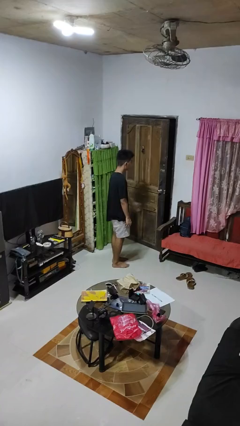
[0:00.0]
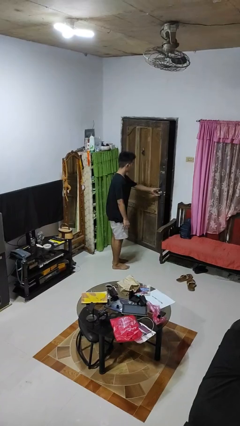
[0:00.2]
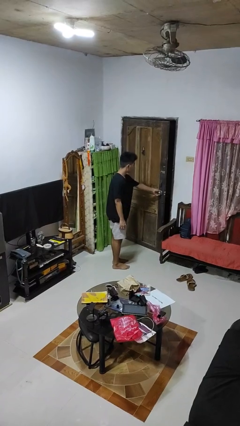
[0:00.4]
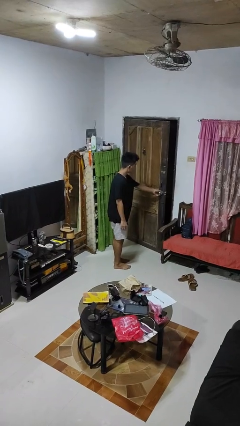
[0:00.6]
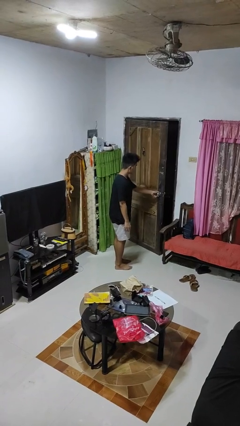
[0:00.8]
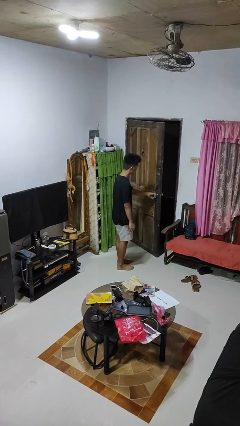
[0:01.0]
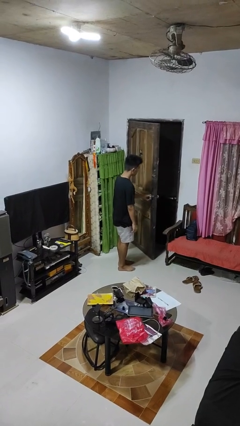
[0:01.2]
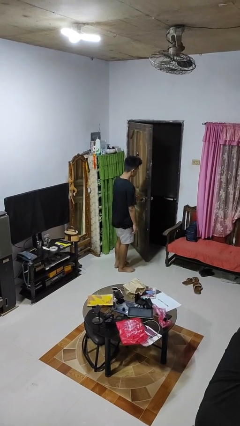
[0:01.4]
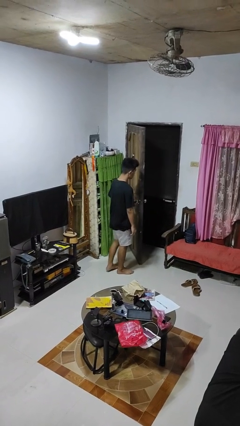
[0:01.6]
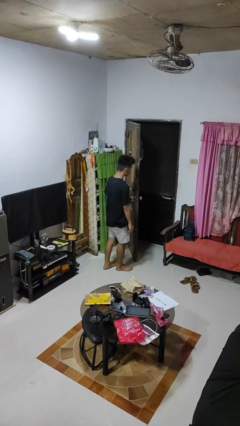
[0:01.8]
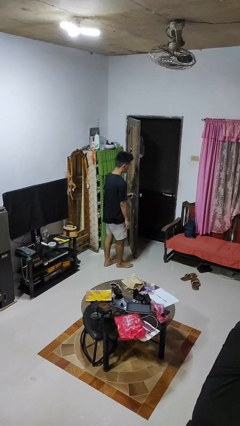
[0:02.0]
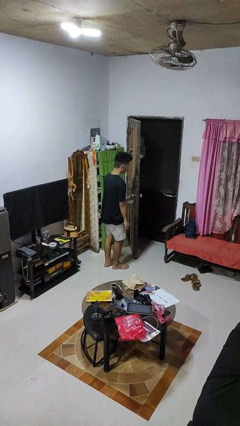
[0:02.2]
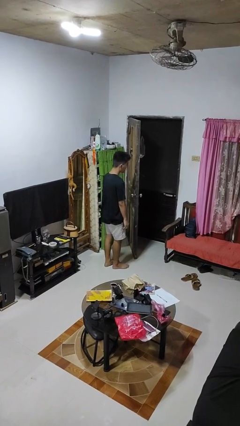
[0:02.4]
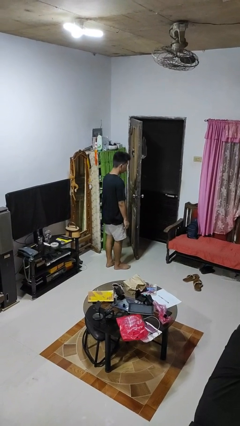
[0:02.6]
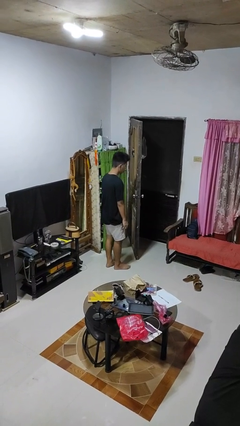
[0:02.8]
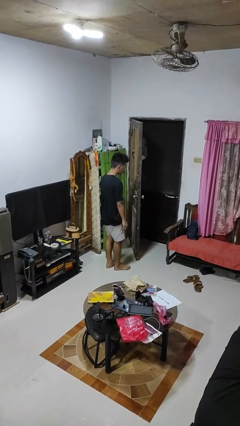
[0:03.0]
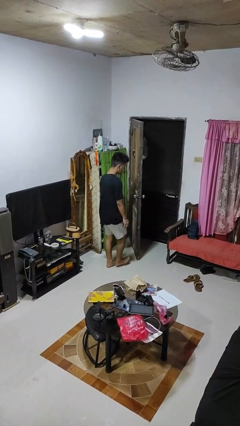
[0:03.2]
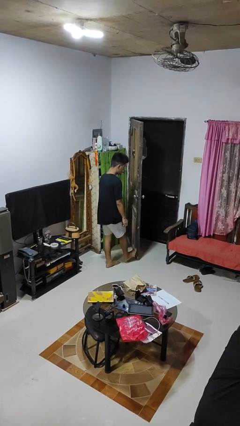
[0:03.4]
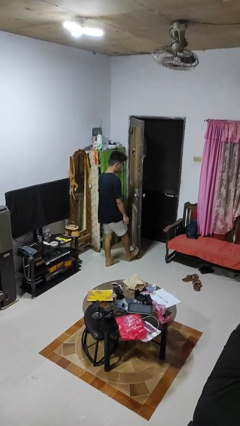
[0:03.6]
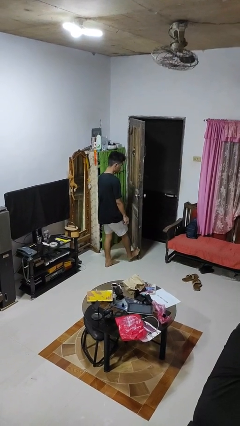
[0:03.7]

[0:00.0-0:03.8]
person opens facility door

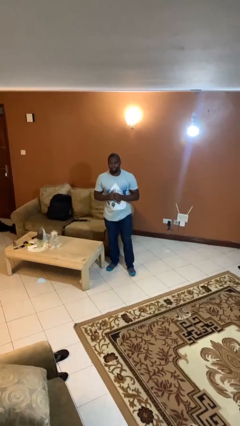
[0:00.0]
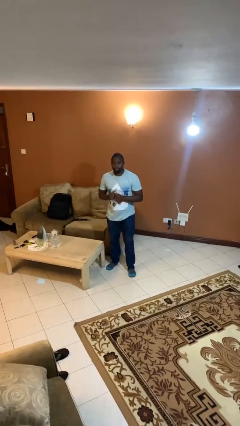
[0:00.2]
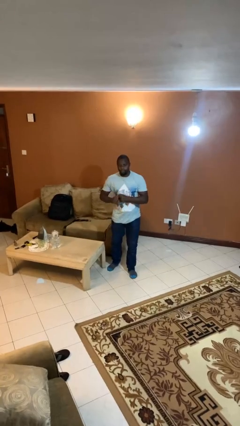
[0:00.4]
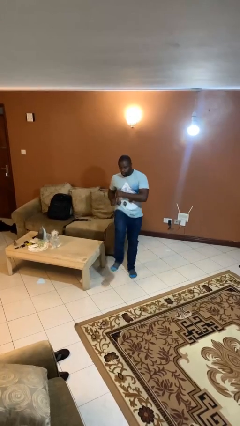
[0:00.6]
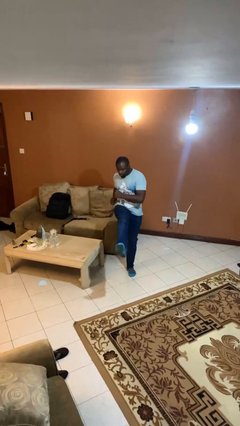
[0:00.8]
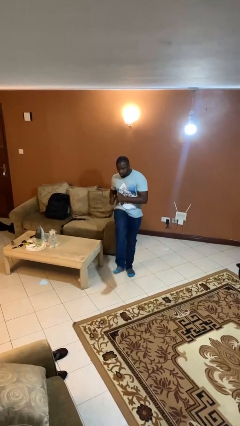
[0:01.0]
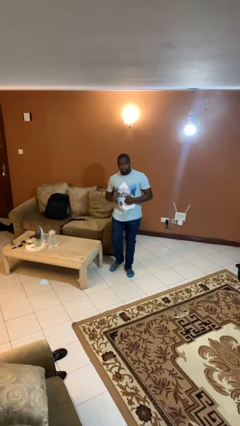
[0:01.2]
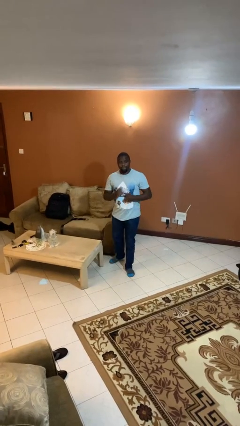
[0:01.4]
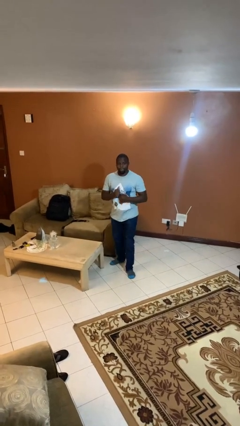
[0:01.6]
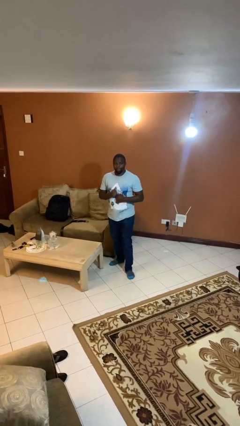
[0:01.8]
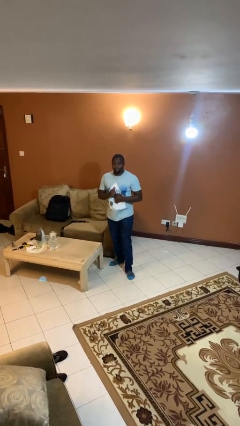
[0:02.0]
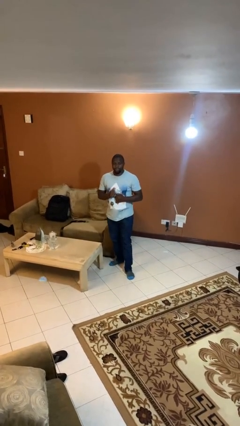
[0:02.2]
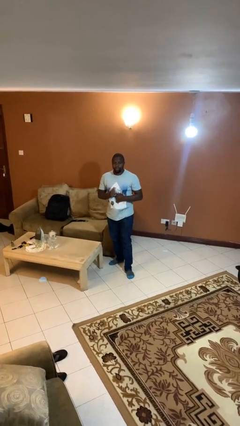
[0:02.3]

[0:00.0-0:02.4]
person karate kicks

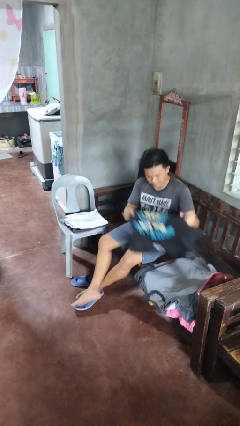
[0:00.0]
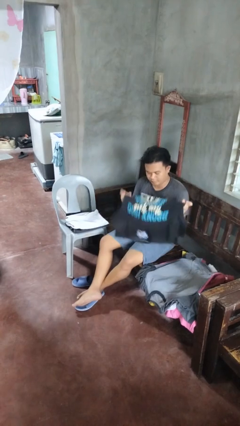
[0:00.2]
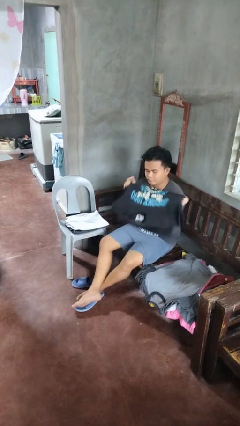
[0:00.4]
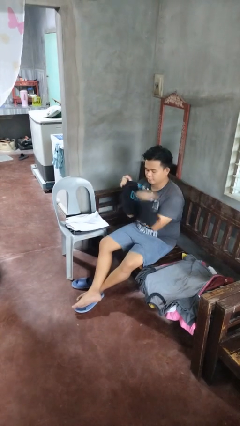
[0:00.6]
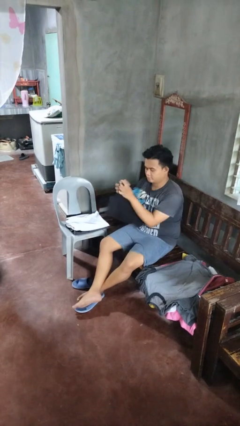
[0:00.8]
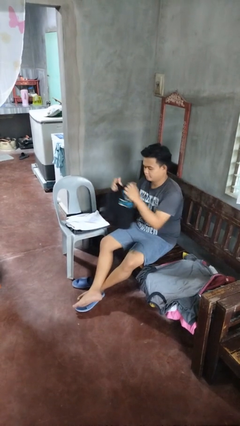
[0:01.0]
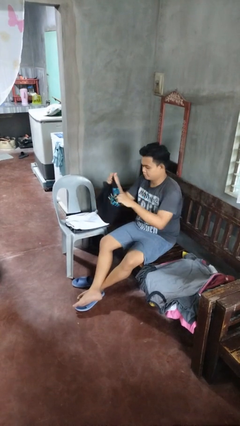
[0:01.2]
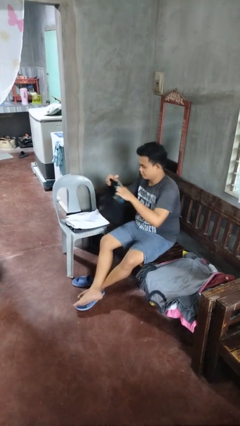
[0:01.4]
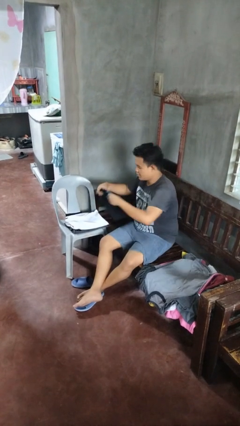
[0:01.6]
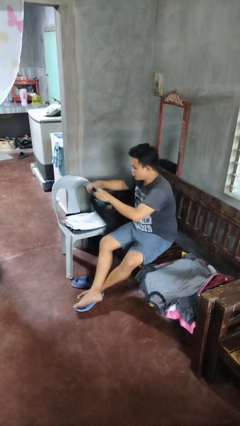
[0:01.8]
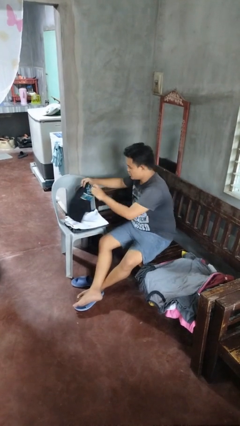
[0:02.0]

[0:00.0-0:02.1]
person folds shirt

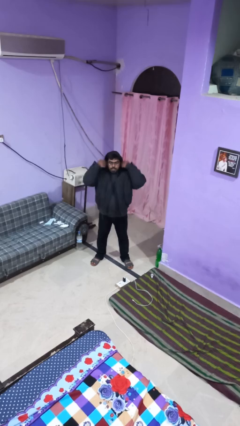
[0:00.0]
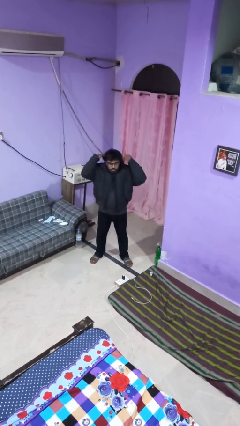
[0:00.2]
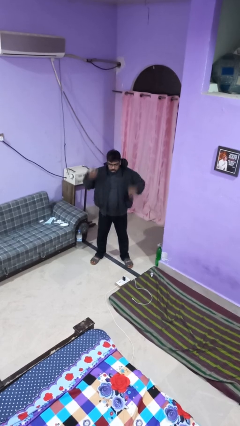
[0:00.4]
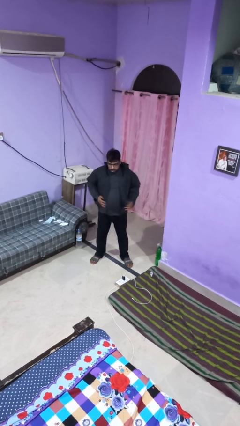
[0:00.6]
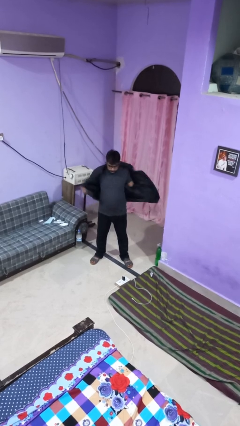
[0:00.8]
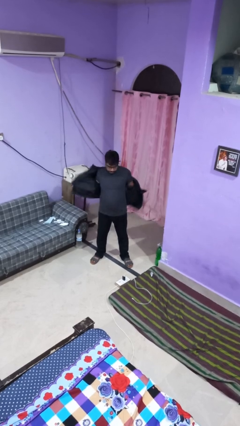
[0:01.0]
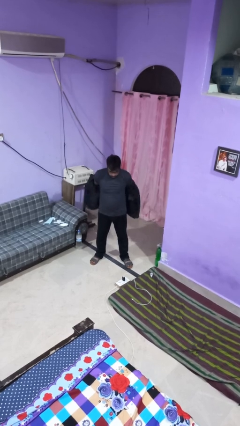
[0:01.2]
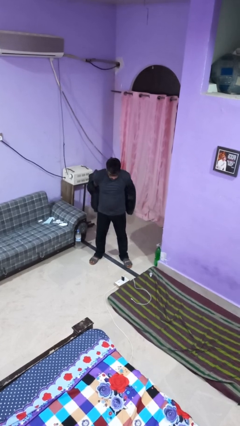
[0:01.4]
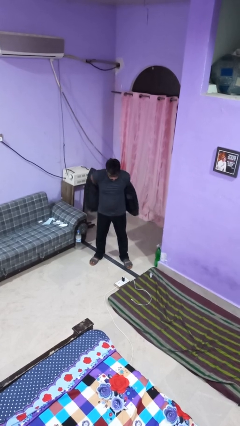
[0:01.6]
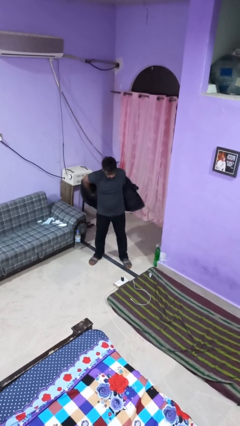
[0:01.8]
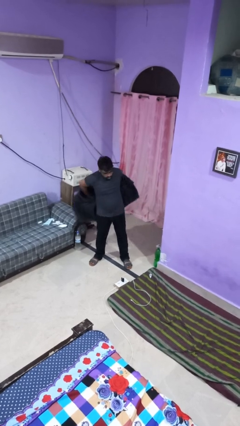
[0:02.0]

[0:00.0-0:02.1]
person takes off jacket

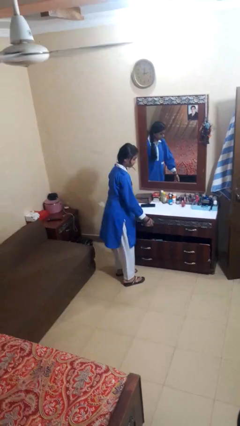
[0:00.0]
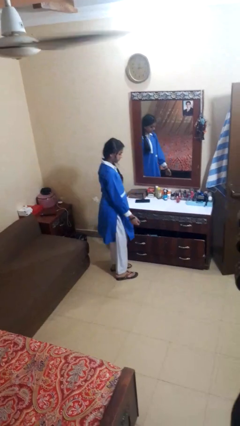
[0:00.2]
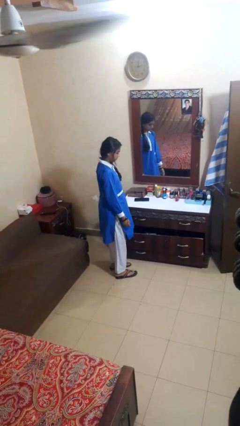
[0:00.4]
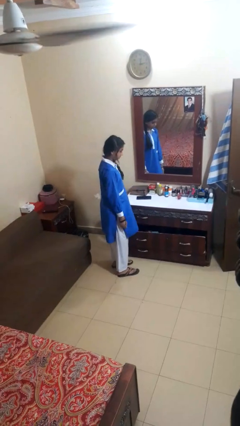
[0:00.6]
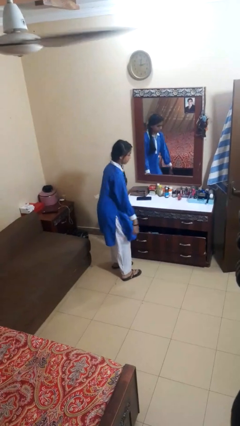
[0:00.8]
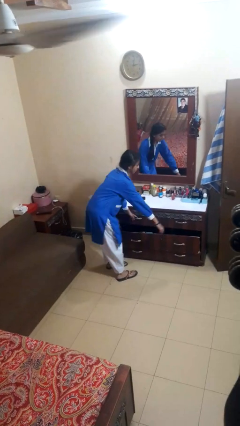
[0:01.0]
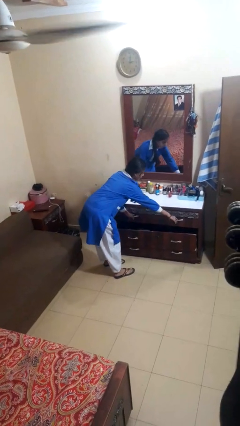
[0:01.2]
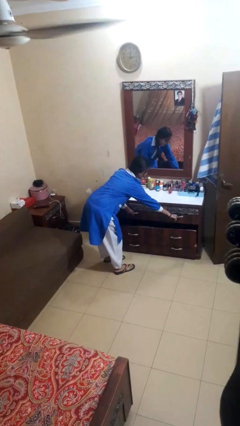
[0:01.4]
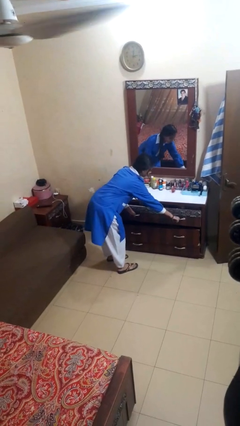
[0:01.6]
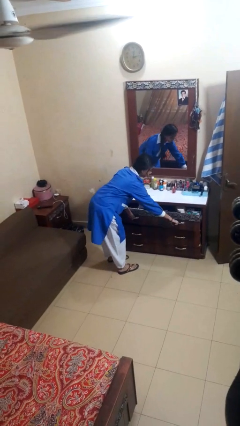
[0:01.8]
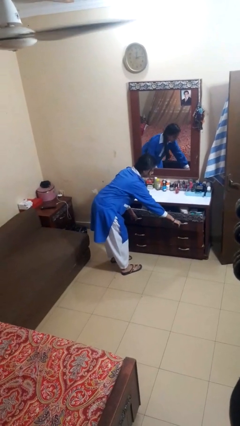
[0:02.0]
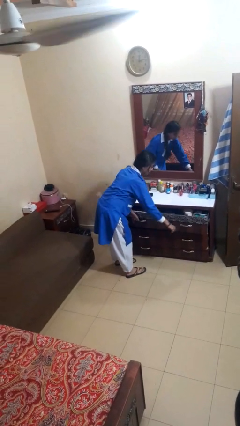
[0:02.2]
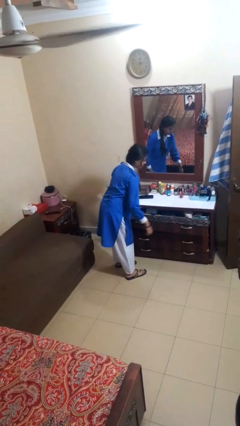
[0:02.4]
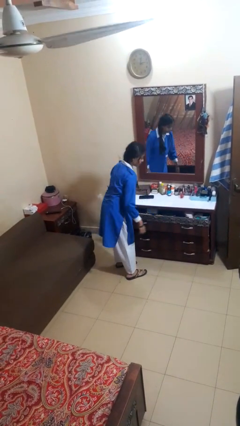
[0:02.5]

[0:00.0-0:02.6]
person opens dresser drawer

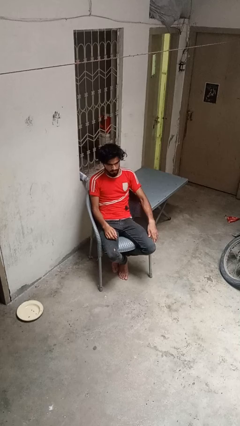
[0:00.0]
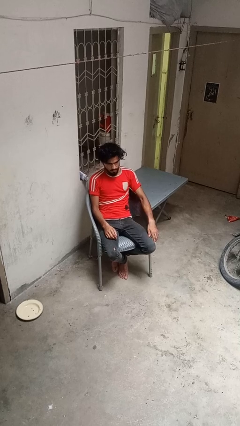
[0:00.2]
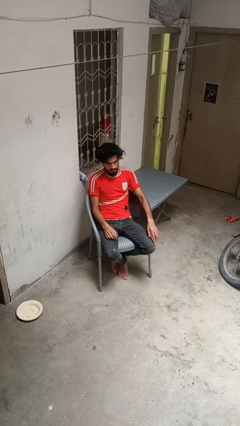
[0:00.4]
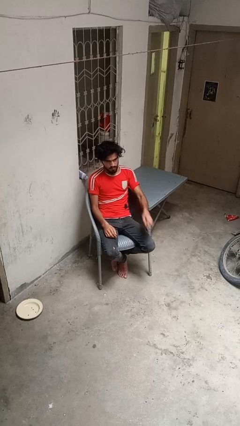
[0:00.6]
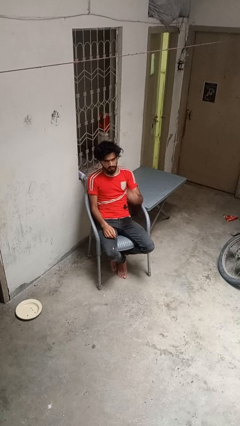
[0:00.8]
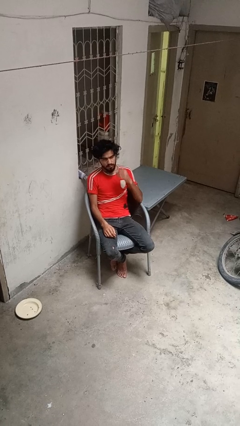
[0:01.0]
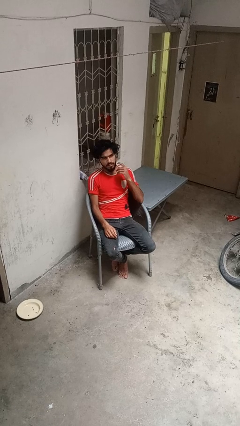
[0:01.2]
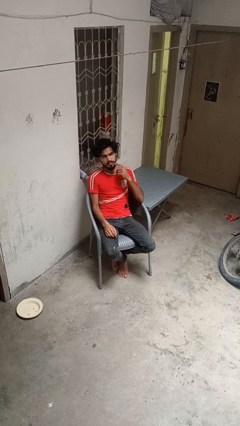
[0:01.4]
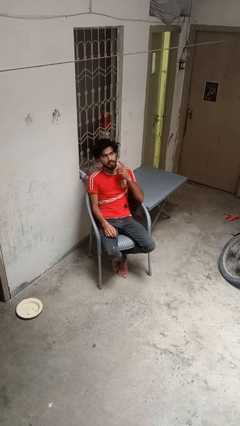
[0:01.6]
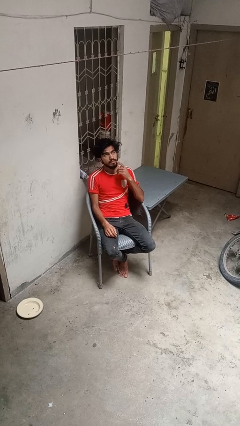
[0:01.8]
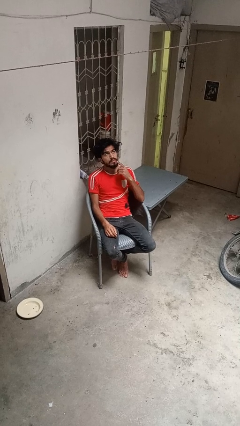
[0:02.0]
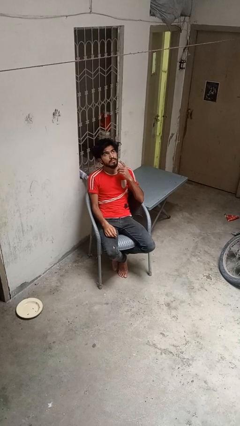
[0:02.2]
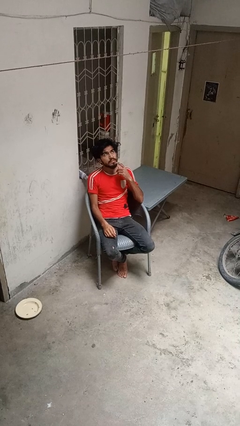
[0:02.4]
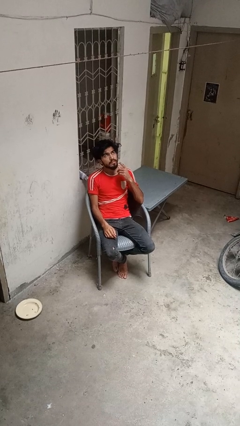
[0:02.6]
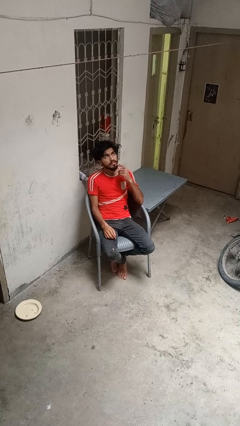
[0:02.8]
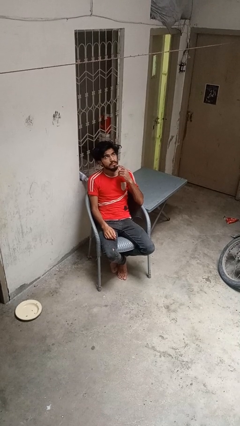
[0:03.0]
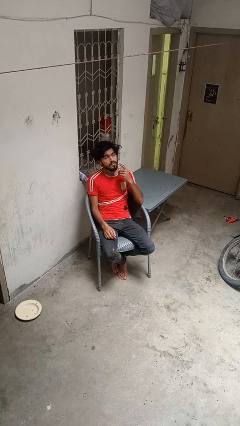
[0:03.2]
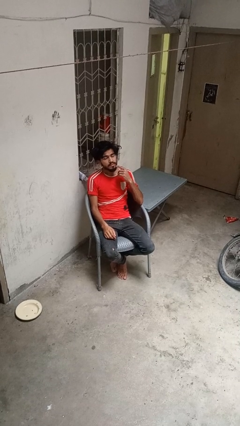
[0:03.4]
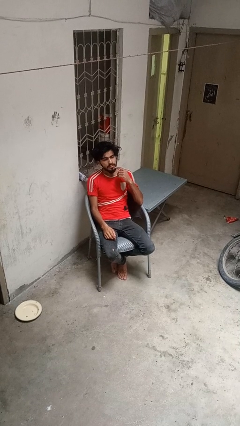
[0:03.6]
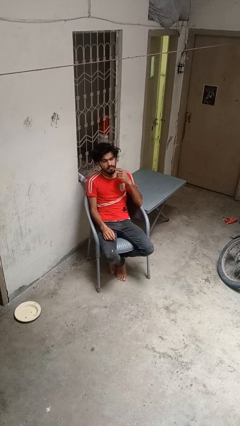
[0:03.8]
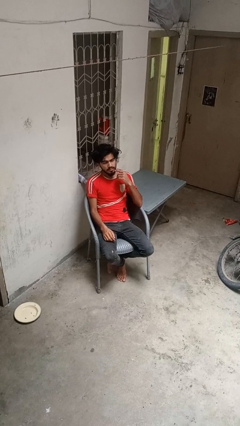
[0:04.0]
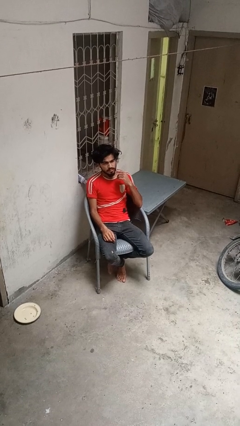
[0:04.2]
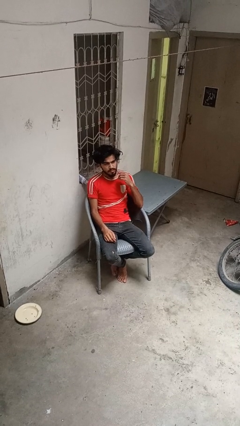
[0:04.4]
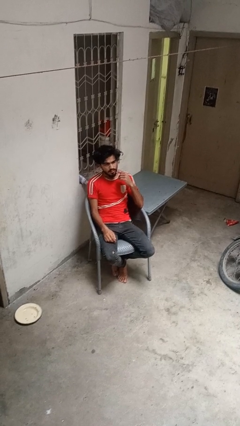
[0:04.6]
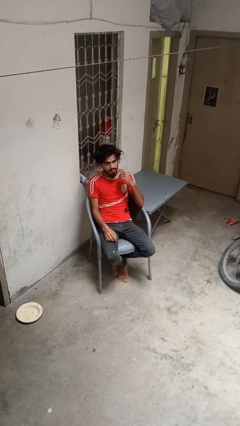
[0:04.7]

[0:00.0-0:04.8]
person strokes chin
